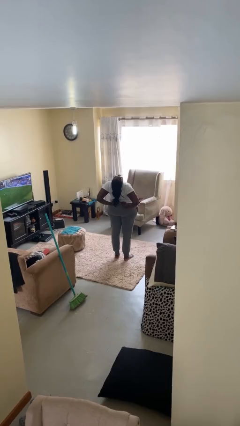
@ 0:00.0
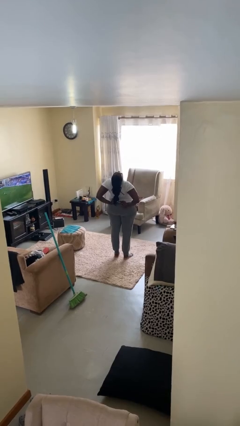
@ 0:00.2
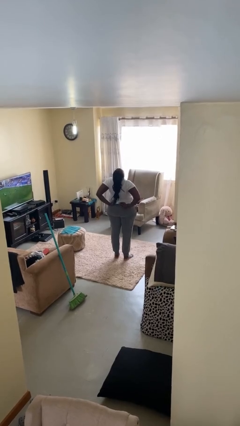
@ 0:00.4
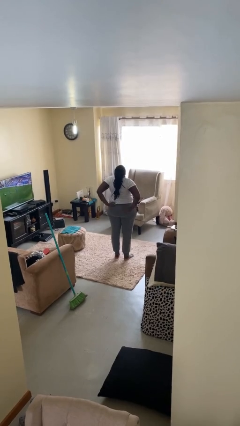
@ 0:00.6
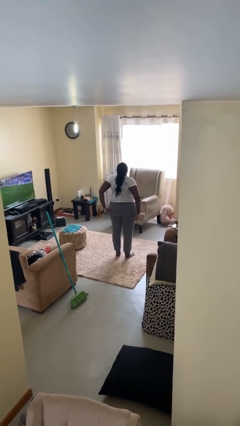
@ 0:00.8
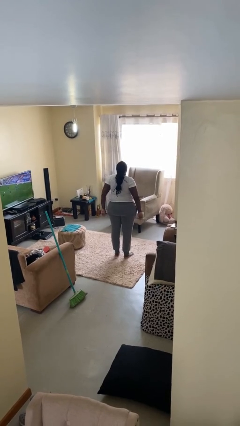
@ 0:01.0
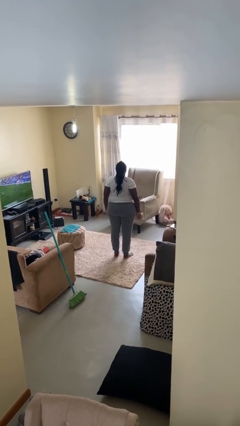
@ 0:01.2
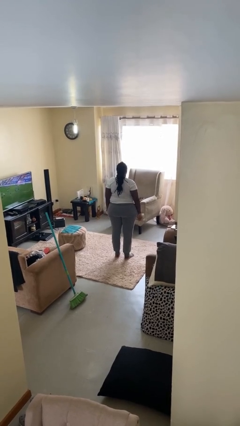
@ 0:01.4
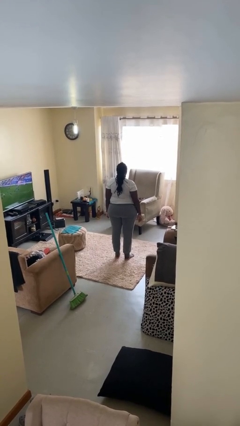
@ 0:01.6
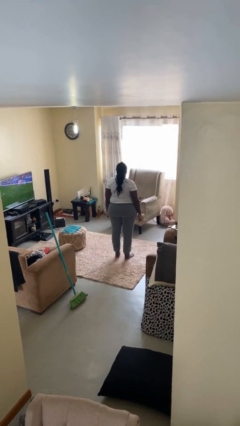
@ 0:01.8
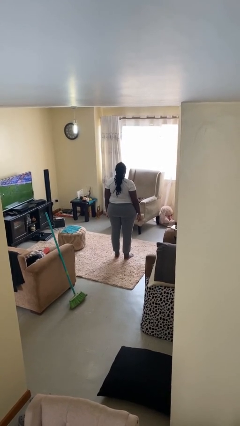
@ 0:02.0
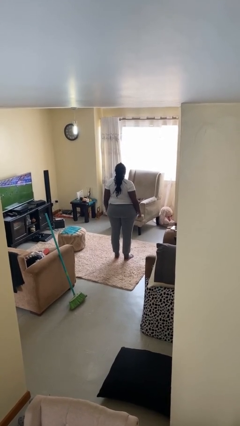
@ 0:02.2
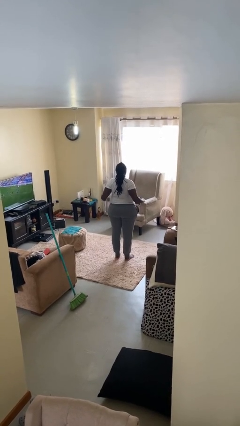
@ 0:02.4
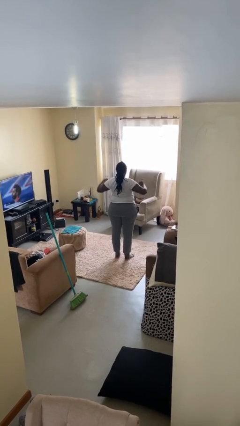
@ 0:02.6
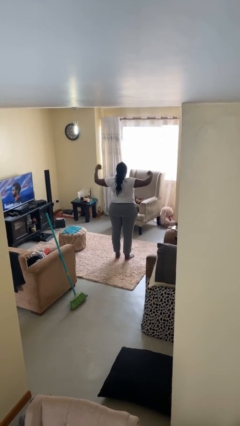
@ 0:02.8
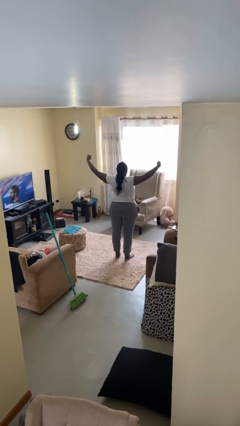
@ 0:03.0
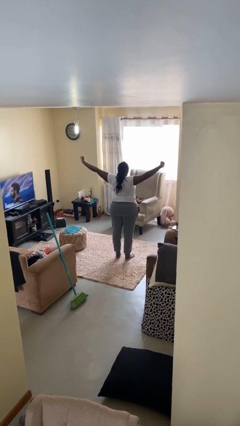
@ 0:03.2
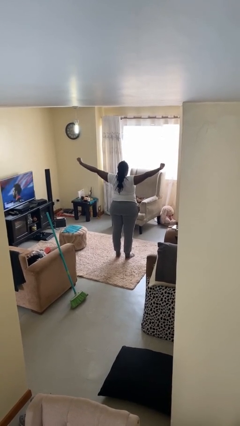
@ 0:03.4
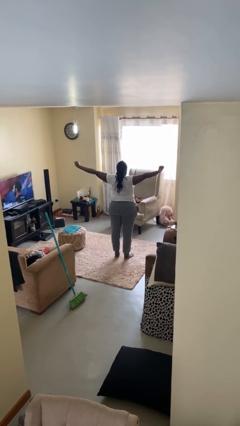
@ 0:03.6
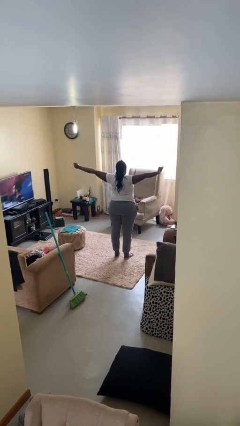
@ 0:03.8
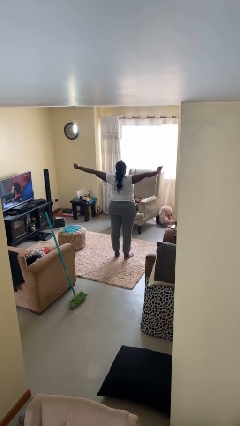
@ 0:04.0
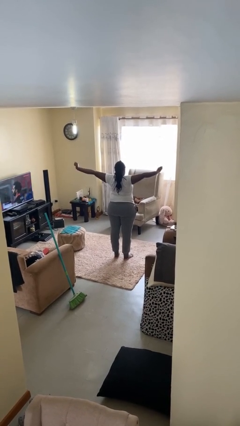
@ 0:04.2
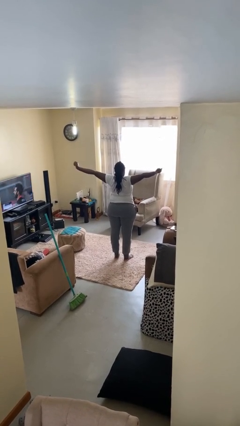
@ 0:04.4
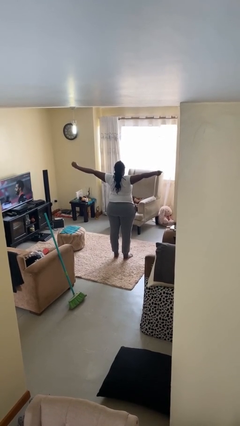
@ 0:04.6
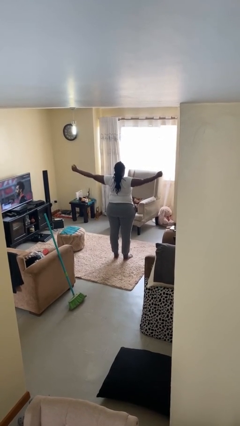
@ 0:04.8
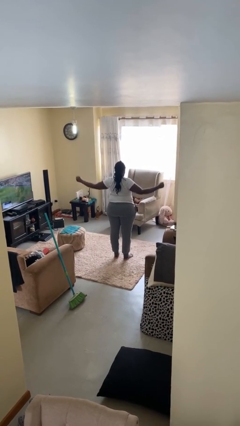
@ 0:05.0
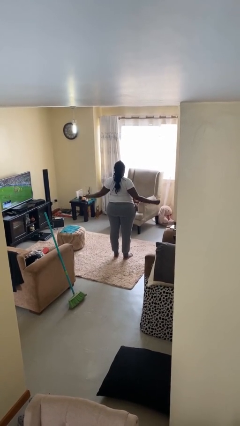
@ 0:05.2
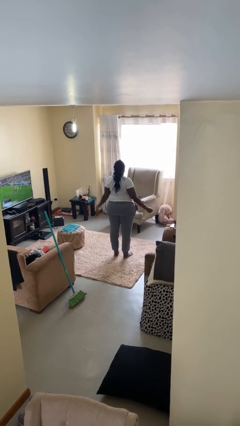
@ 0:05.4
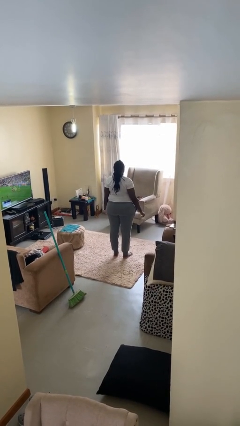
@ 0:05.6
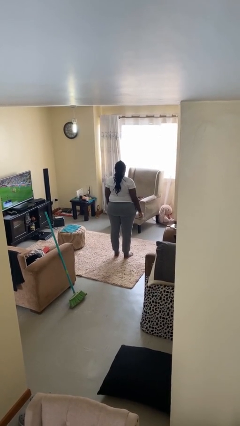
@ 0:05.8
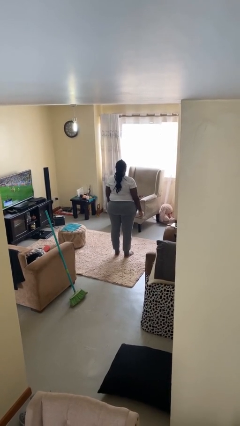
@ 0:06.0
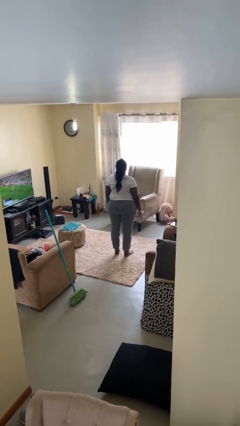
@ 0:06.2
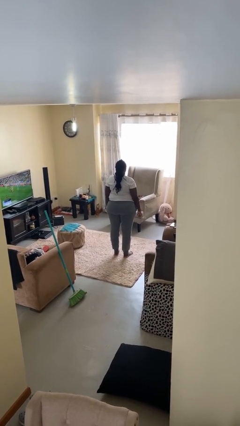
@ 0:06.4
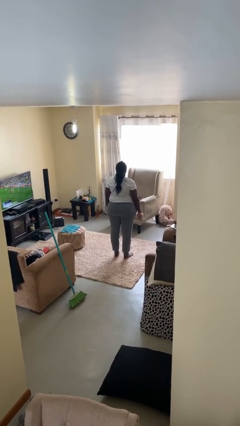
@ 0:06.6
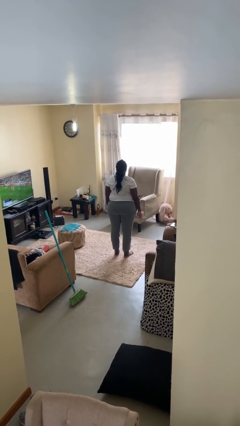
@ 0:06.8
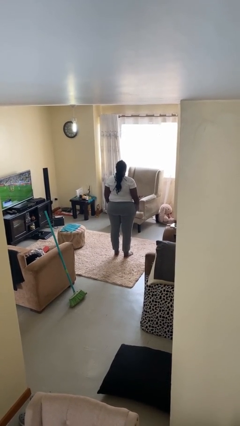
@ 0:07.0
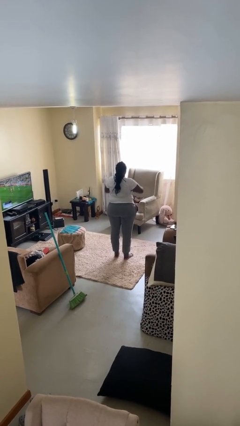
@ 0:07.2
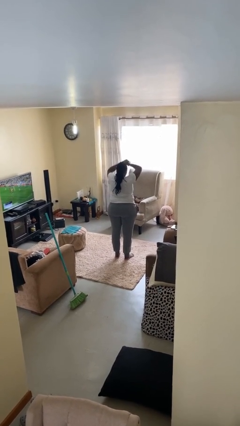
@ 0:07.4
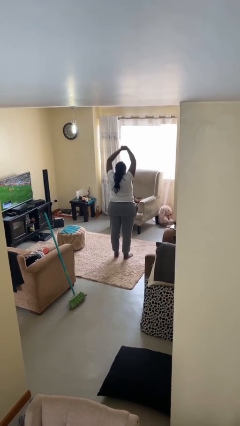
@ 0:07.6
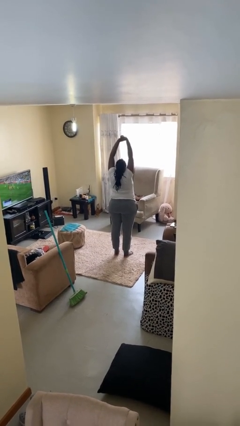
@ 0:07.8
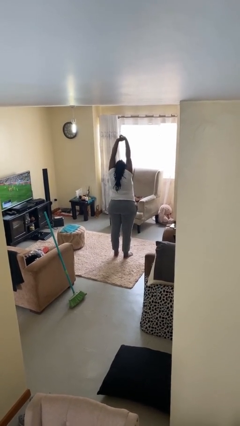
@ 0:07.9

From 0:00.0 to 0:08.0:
person stretches arms to side

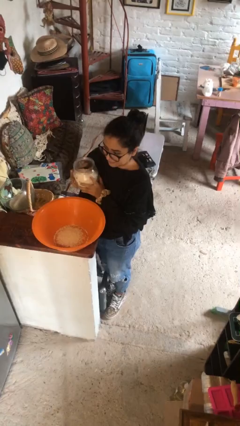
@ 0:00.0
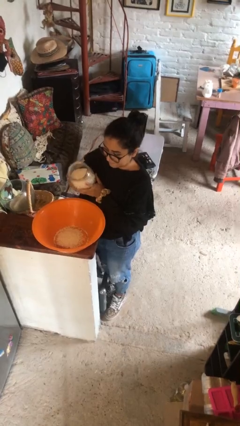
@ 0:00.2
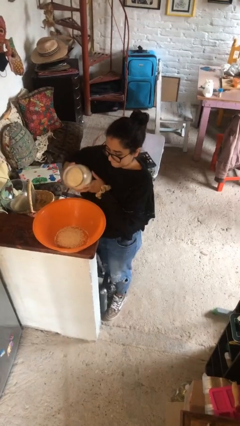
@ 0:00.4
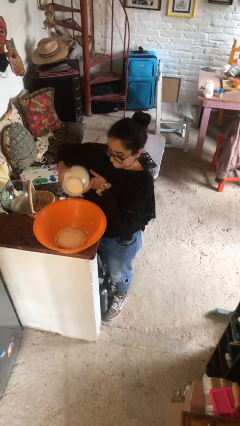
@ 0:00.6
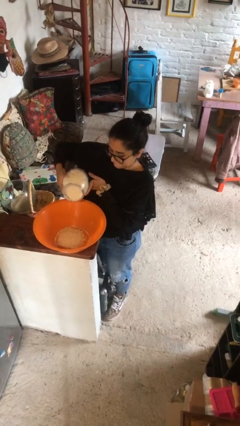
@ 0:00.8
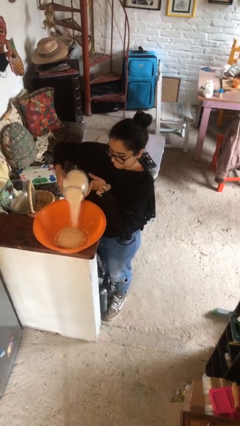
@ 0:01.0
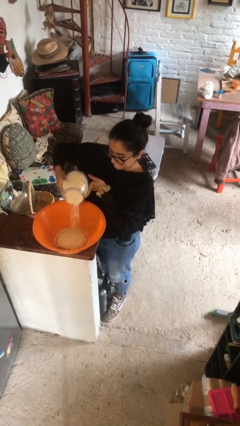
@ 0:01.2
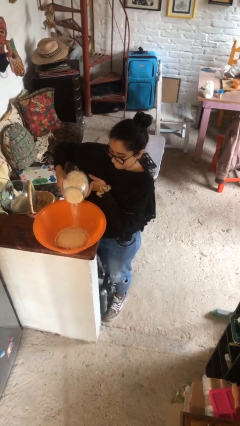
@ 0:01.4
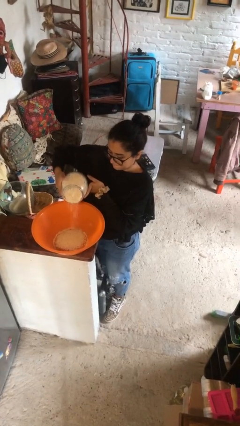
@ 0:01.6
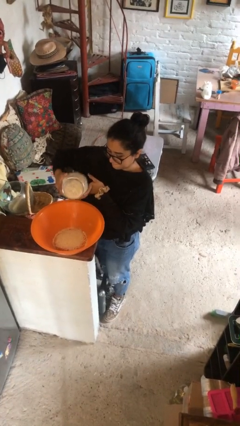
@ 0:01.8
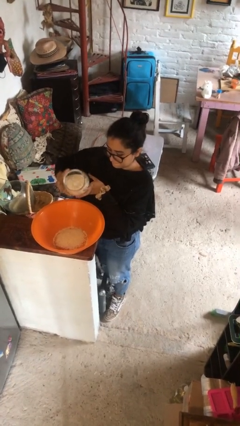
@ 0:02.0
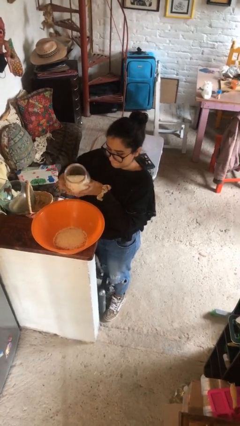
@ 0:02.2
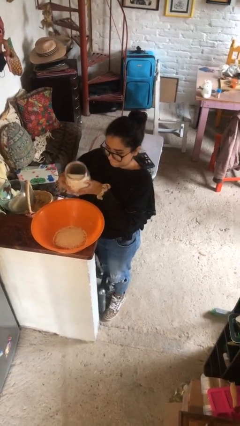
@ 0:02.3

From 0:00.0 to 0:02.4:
person pours into bowl

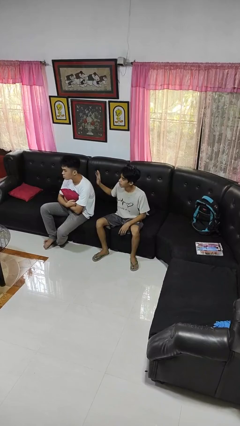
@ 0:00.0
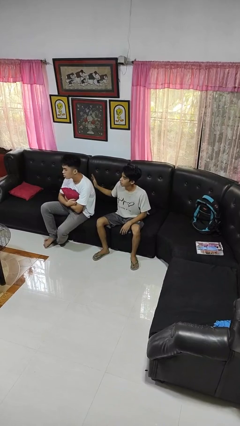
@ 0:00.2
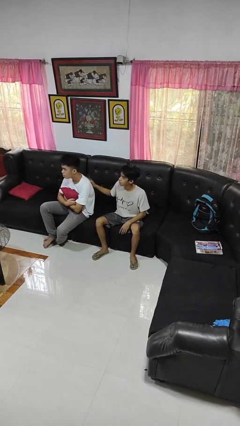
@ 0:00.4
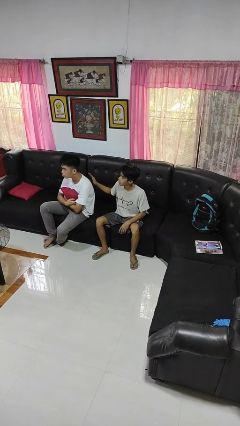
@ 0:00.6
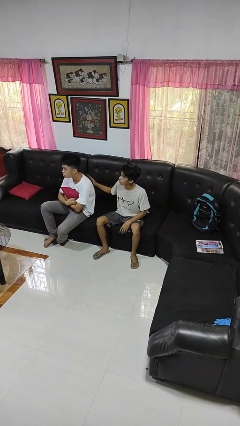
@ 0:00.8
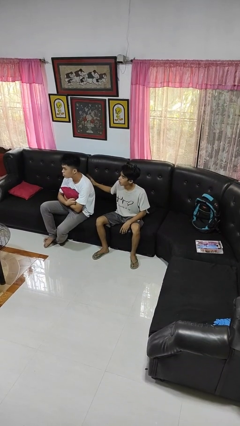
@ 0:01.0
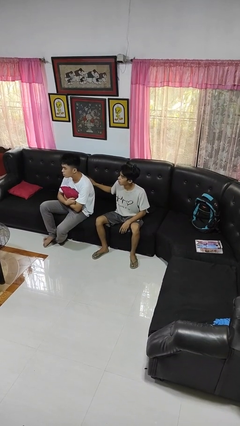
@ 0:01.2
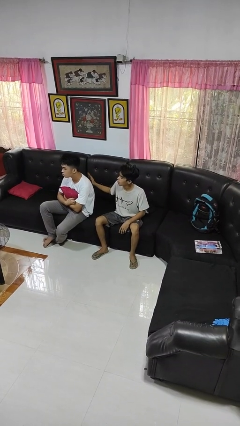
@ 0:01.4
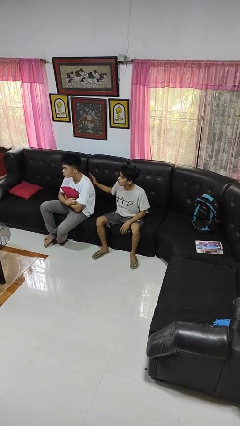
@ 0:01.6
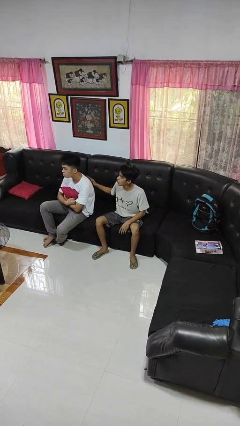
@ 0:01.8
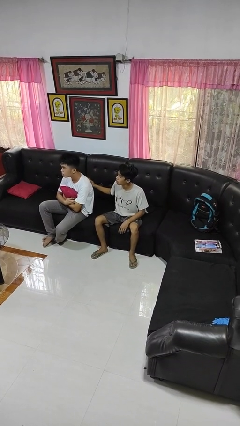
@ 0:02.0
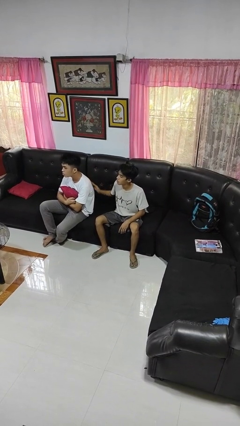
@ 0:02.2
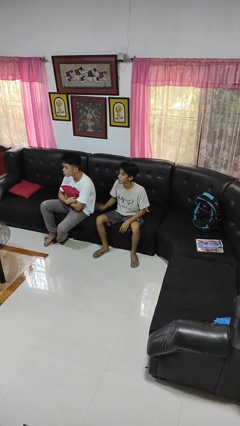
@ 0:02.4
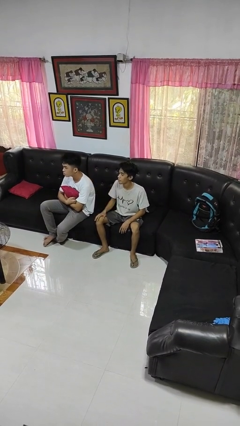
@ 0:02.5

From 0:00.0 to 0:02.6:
person touches back of person

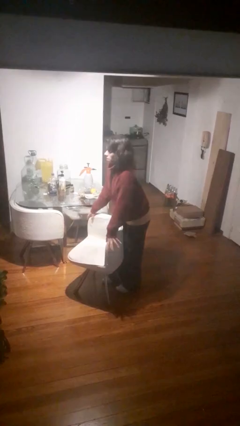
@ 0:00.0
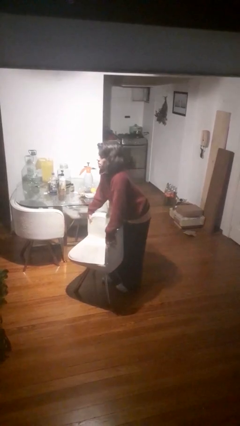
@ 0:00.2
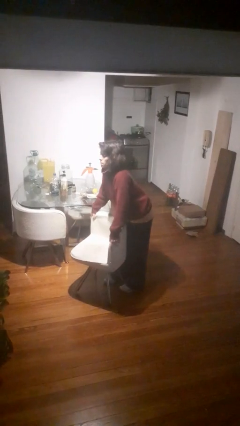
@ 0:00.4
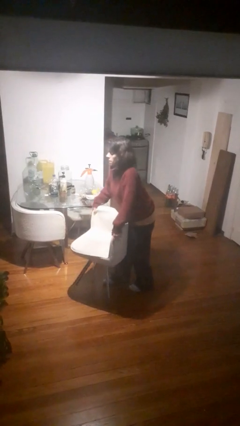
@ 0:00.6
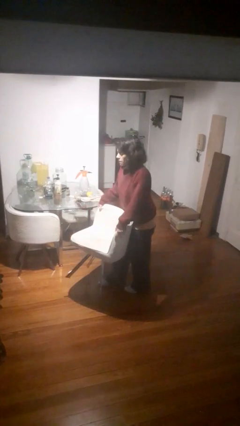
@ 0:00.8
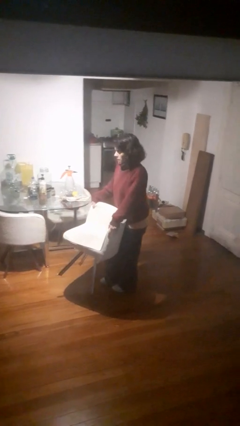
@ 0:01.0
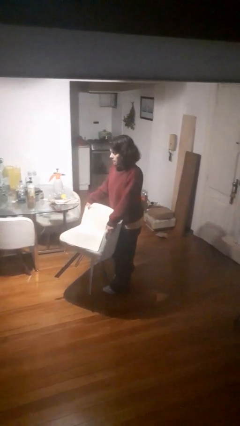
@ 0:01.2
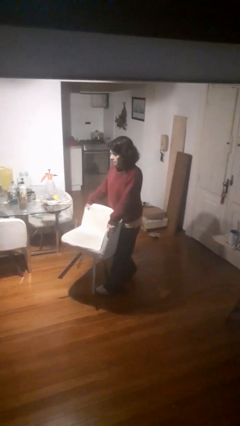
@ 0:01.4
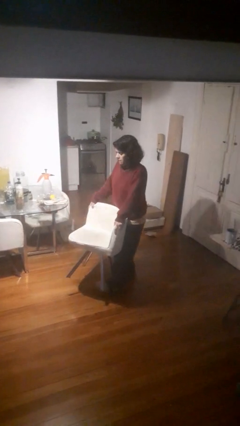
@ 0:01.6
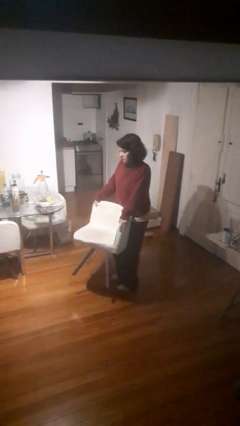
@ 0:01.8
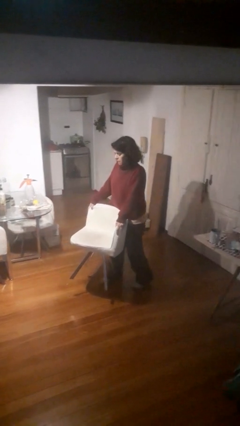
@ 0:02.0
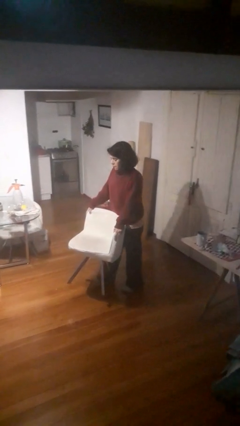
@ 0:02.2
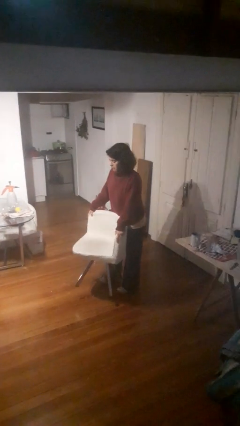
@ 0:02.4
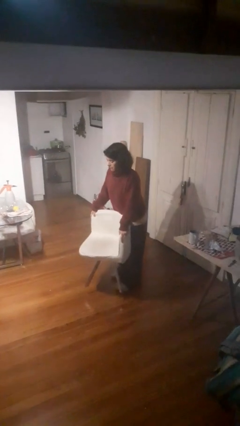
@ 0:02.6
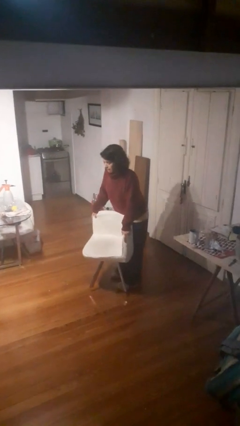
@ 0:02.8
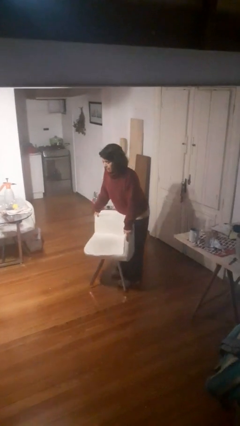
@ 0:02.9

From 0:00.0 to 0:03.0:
person carries furniture

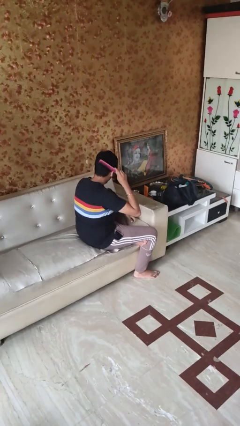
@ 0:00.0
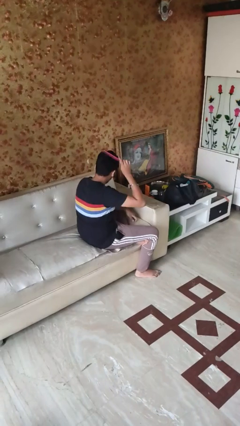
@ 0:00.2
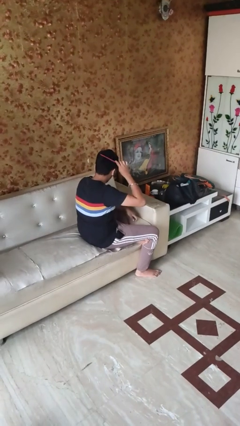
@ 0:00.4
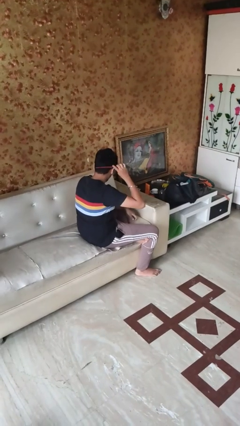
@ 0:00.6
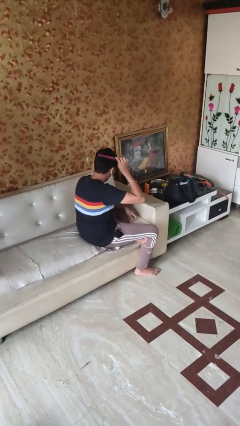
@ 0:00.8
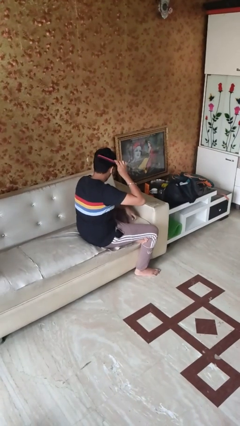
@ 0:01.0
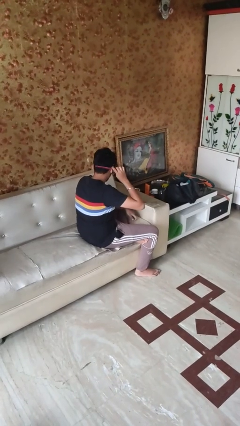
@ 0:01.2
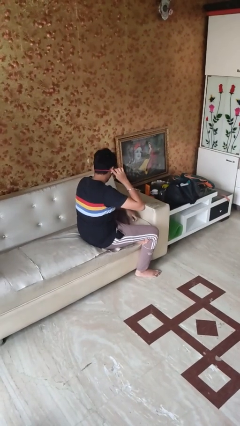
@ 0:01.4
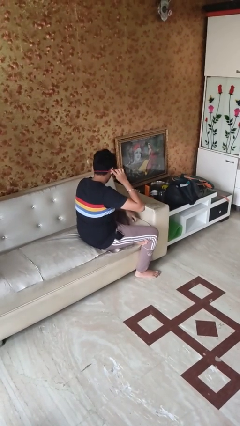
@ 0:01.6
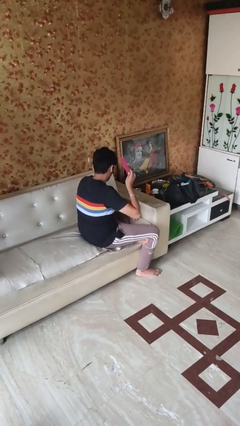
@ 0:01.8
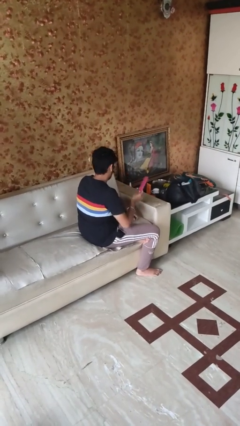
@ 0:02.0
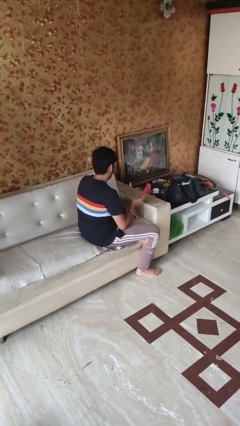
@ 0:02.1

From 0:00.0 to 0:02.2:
person brushes hair
